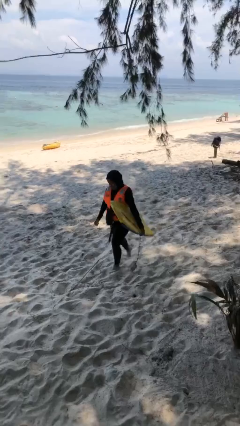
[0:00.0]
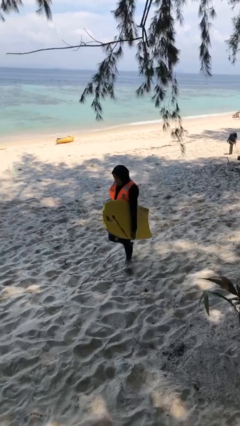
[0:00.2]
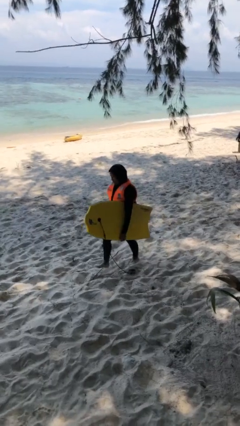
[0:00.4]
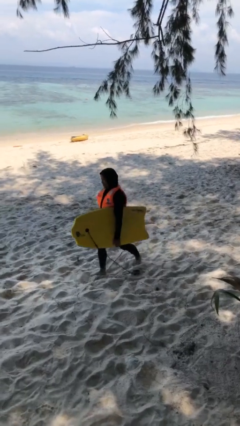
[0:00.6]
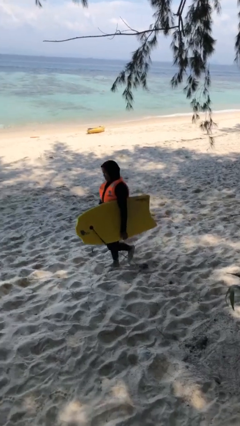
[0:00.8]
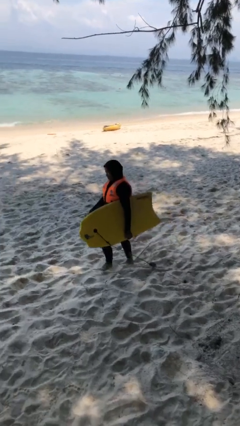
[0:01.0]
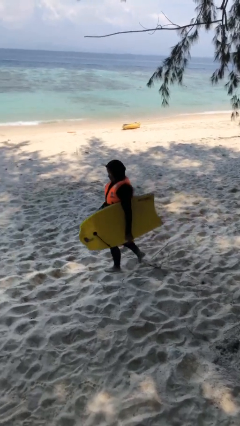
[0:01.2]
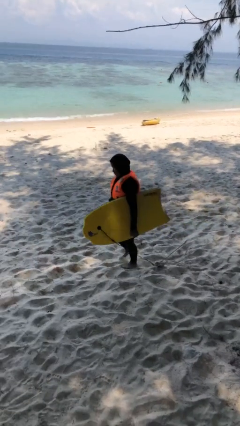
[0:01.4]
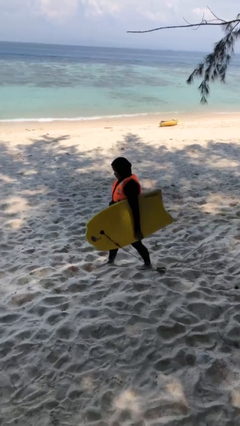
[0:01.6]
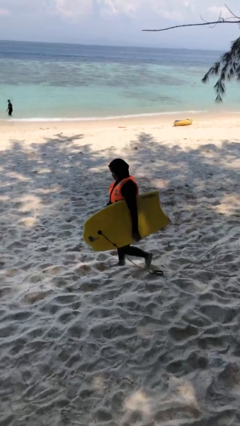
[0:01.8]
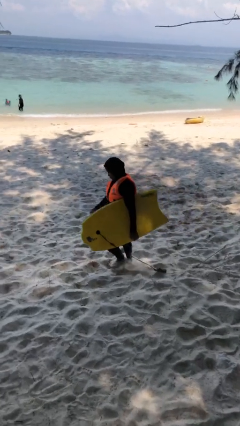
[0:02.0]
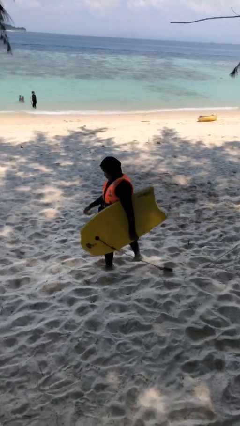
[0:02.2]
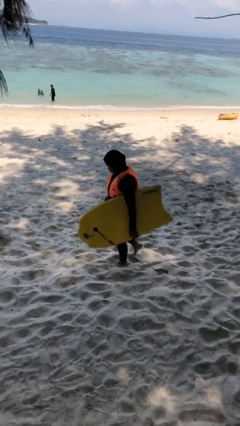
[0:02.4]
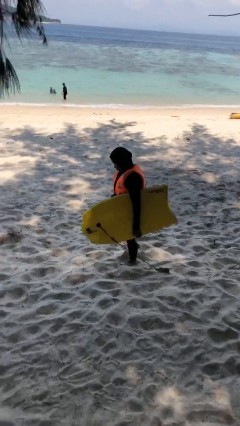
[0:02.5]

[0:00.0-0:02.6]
person carries heavy object

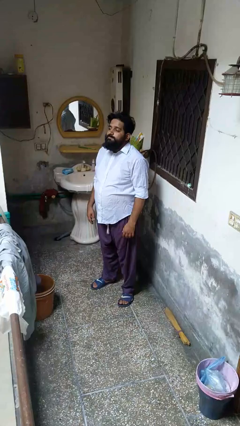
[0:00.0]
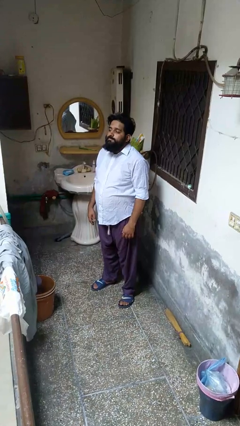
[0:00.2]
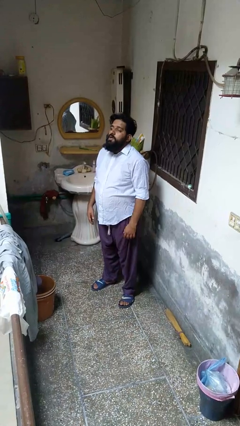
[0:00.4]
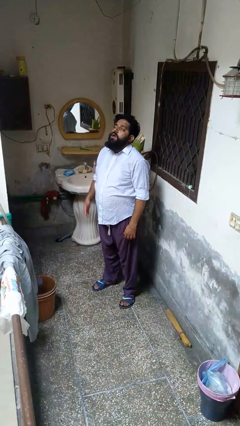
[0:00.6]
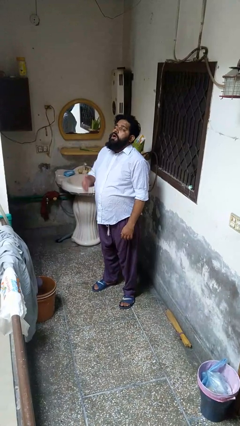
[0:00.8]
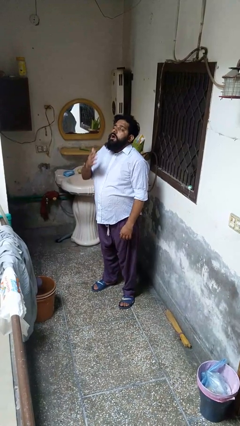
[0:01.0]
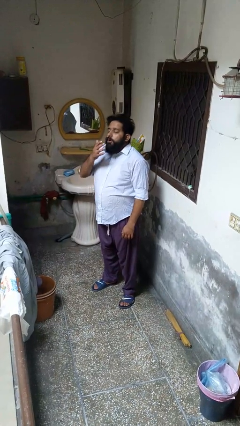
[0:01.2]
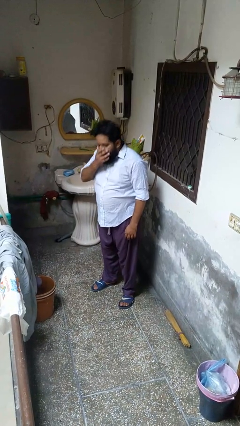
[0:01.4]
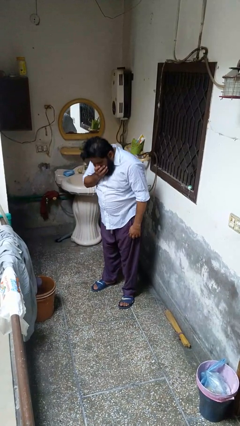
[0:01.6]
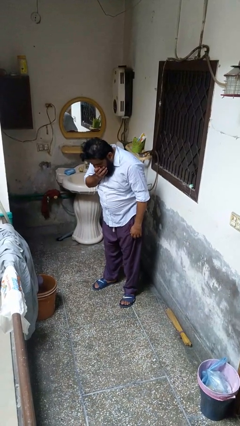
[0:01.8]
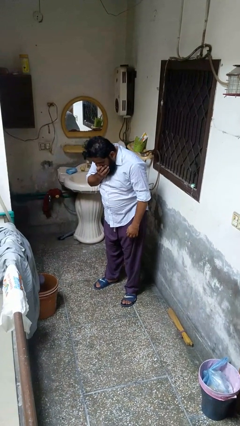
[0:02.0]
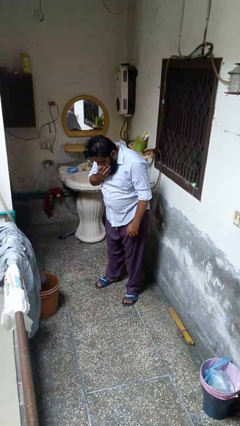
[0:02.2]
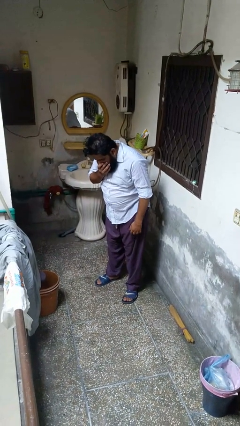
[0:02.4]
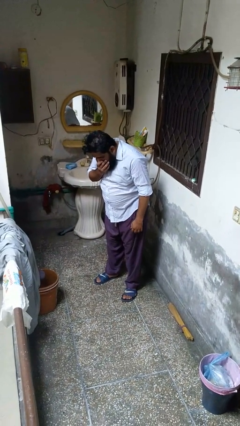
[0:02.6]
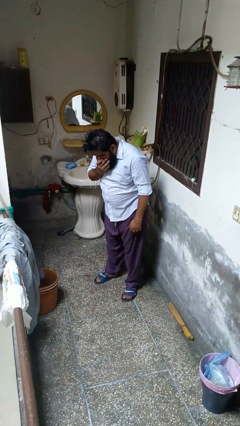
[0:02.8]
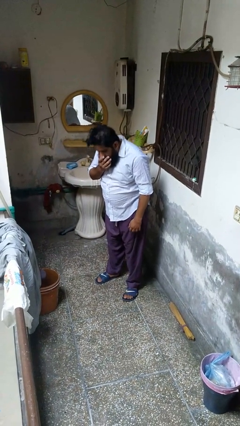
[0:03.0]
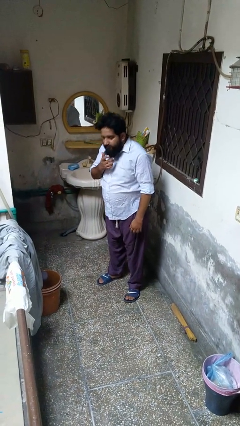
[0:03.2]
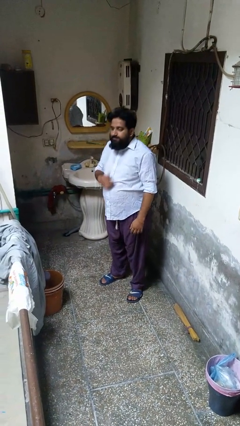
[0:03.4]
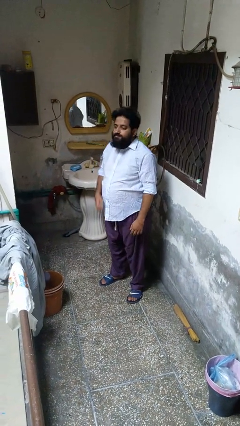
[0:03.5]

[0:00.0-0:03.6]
person sneezes into hand

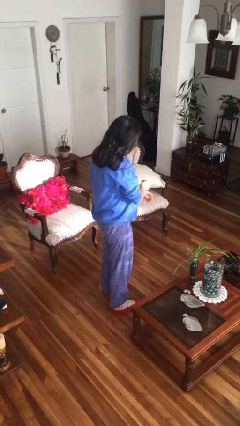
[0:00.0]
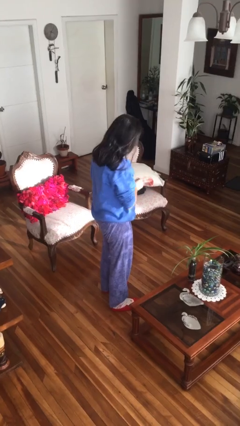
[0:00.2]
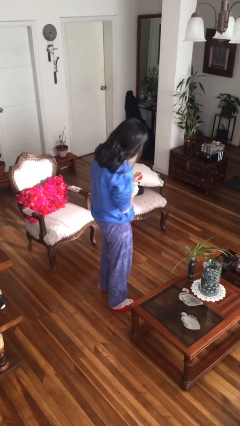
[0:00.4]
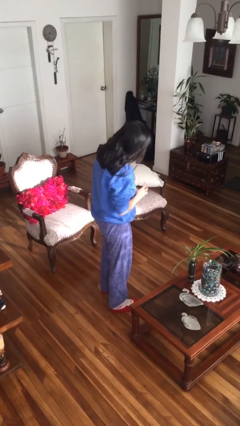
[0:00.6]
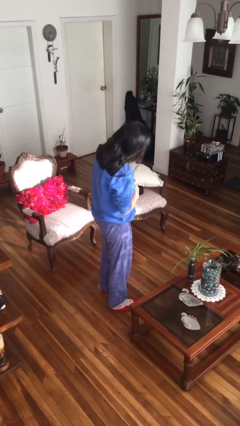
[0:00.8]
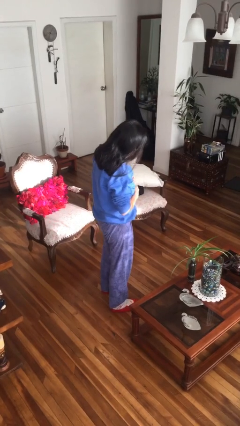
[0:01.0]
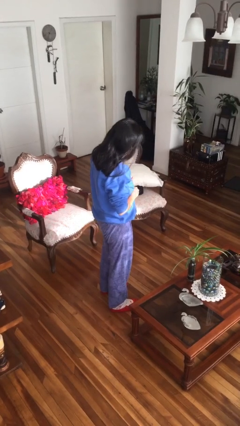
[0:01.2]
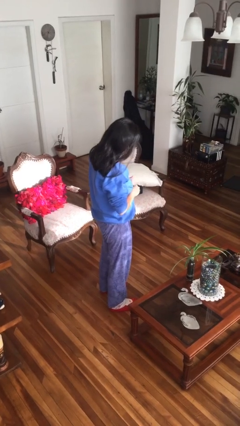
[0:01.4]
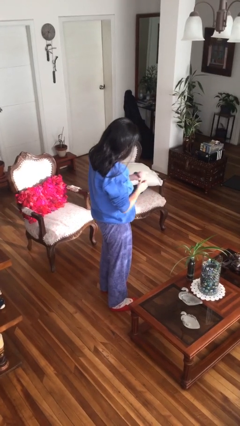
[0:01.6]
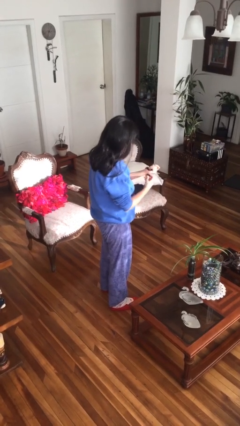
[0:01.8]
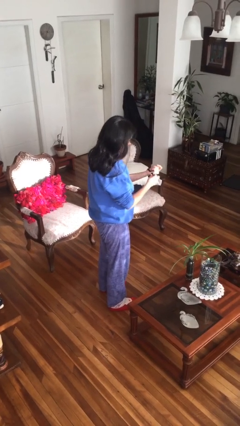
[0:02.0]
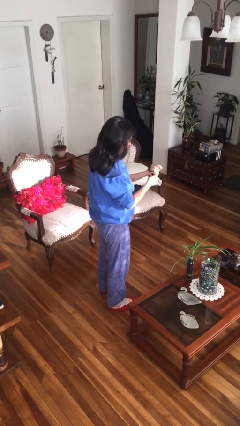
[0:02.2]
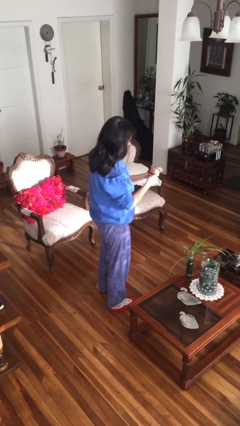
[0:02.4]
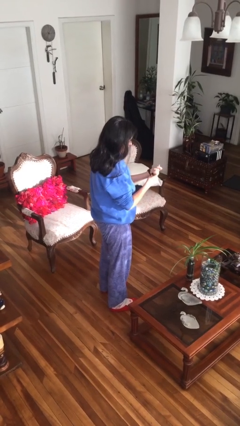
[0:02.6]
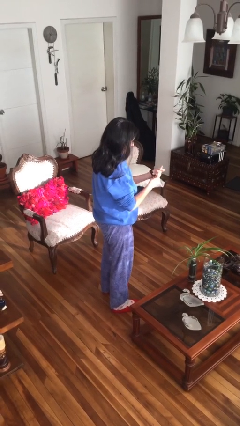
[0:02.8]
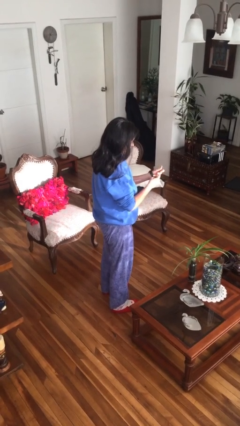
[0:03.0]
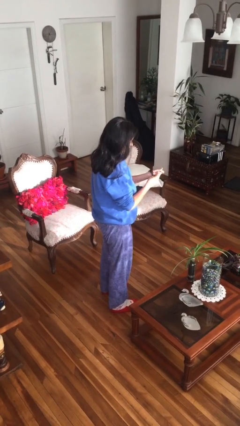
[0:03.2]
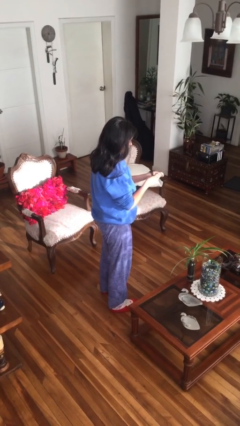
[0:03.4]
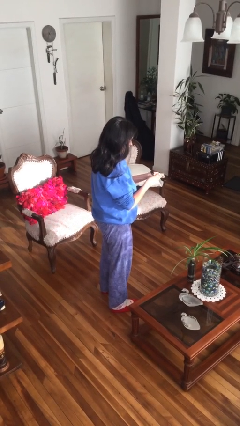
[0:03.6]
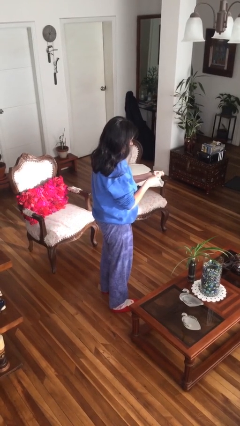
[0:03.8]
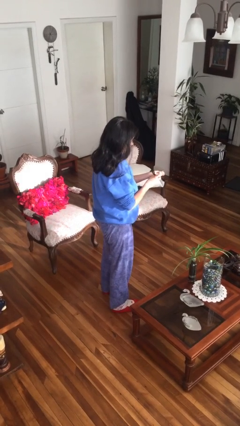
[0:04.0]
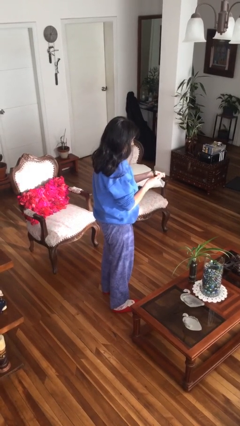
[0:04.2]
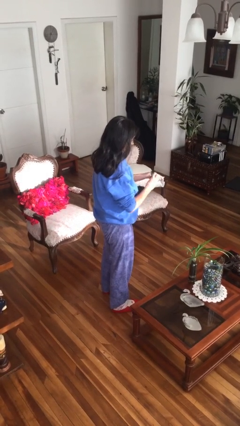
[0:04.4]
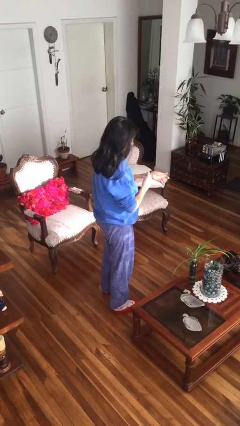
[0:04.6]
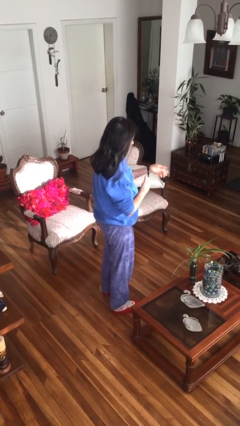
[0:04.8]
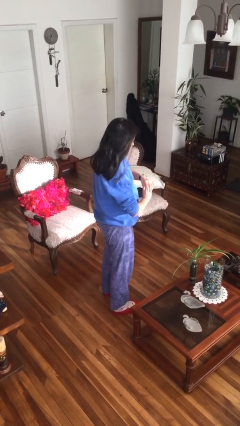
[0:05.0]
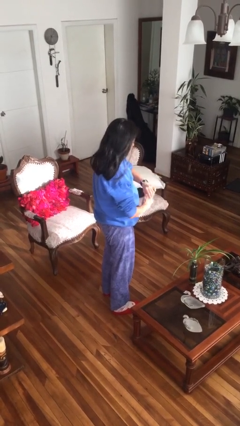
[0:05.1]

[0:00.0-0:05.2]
person puts on wristwatch

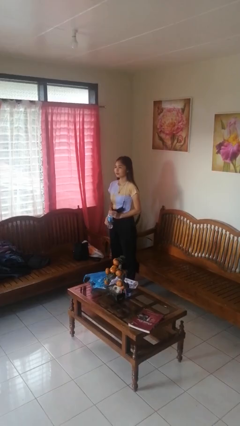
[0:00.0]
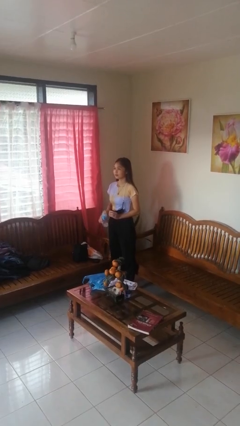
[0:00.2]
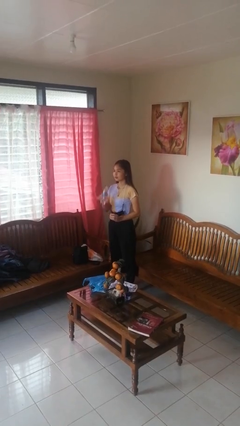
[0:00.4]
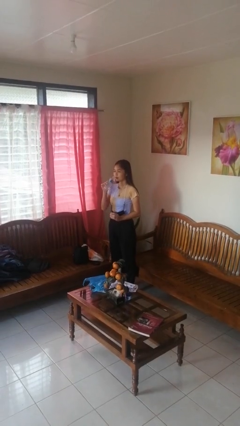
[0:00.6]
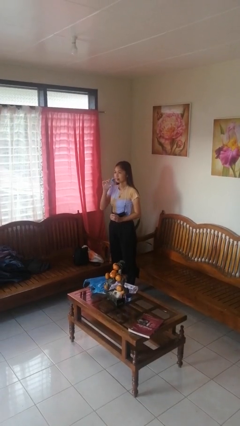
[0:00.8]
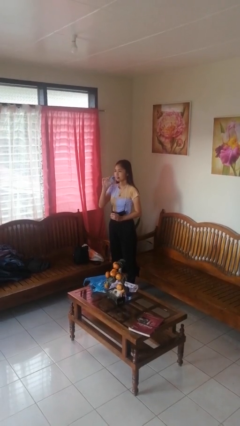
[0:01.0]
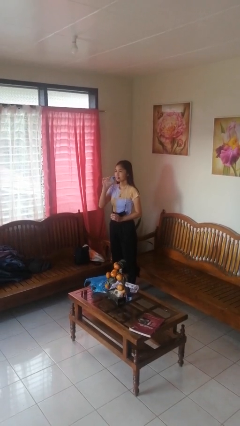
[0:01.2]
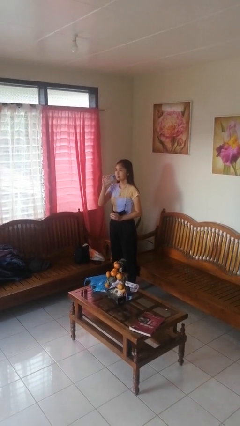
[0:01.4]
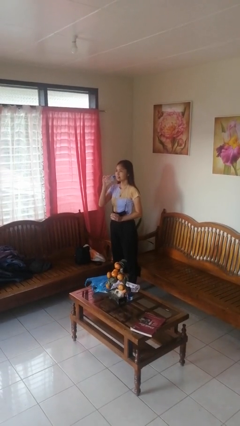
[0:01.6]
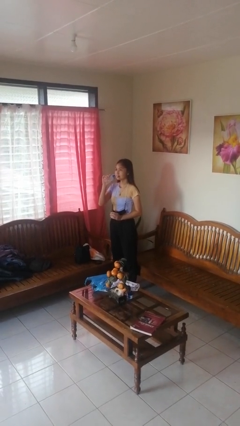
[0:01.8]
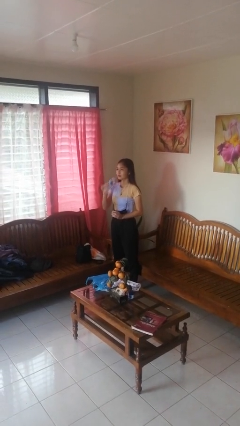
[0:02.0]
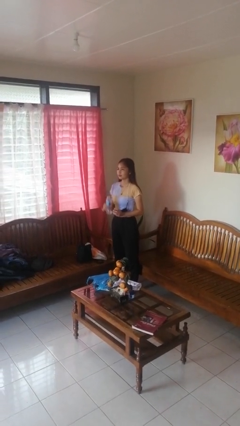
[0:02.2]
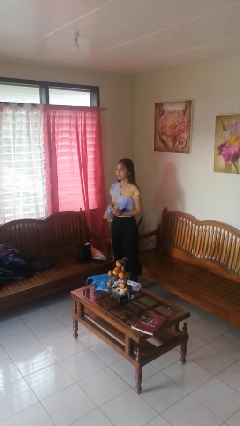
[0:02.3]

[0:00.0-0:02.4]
person drinks from bottle

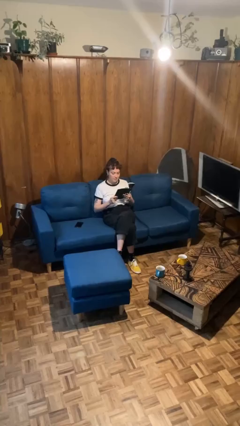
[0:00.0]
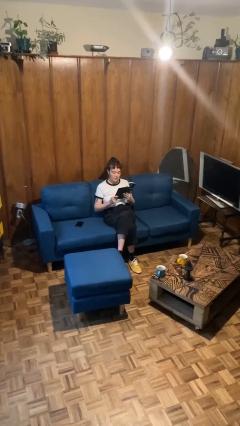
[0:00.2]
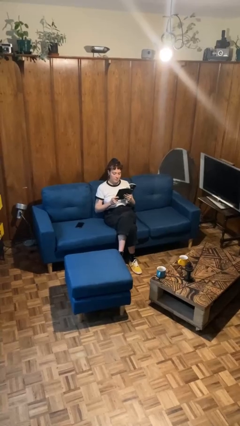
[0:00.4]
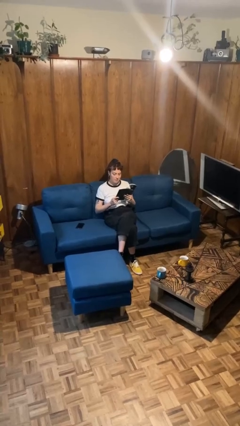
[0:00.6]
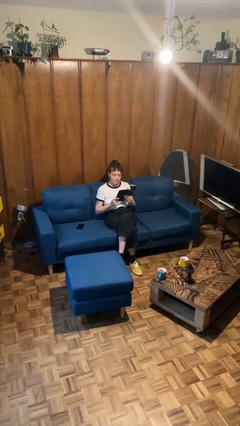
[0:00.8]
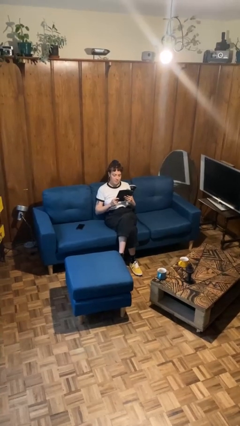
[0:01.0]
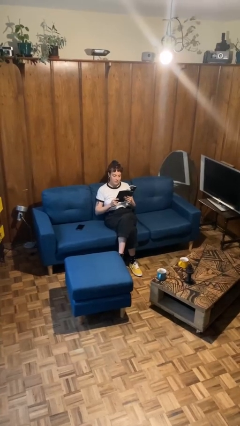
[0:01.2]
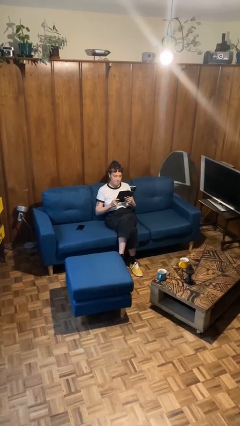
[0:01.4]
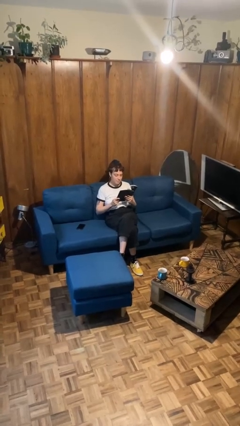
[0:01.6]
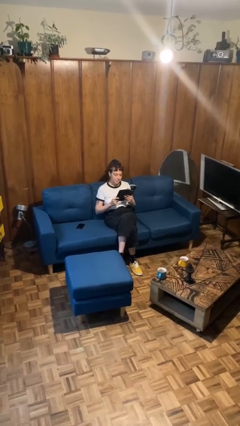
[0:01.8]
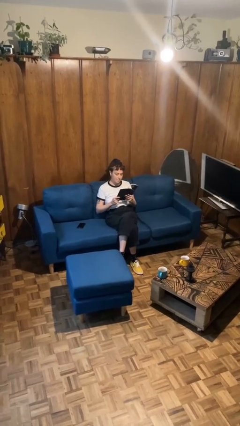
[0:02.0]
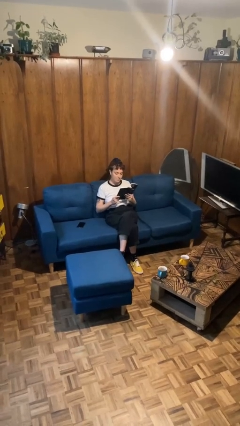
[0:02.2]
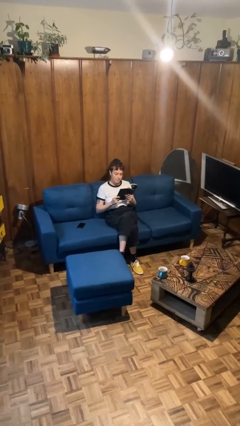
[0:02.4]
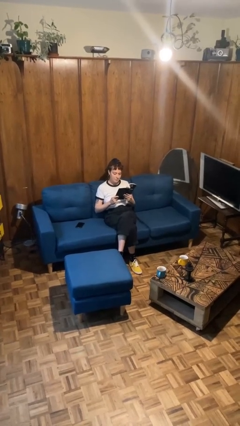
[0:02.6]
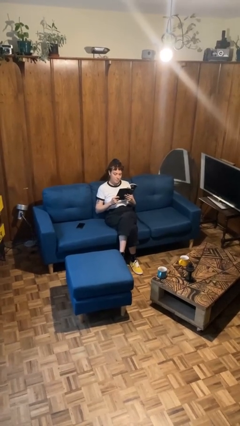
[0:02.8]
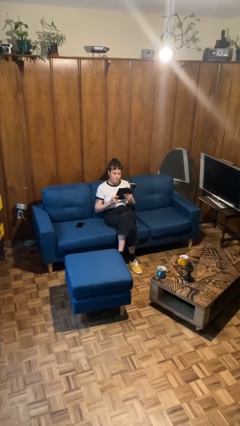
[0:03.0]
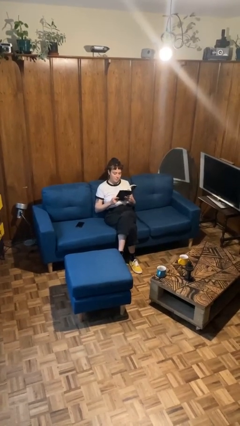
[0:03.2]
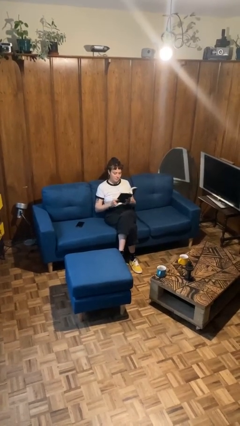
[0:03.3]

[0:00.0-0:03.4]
person reads document

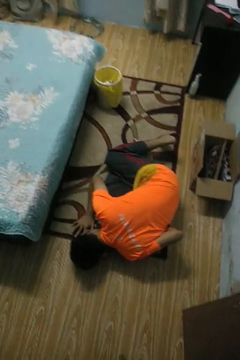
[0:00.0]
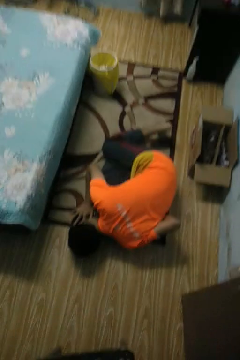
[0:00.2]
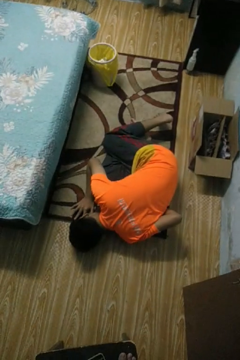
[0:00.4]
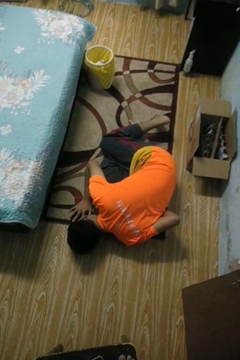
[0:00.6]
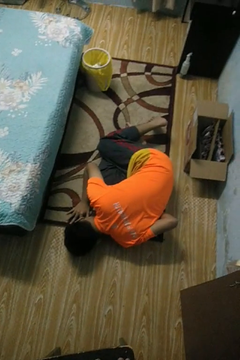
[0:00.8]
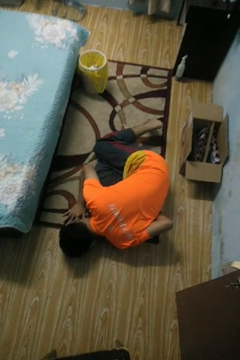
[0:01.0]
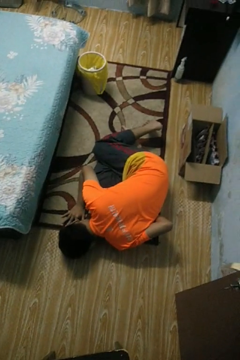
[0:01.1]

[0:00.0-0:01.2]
person lies down on floor
